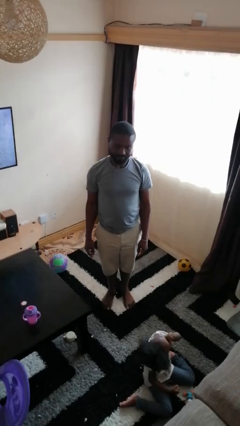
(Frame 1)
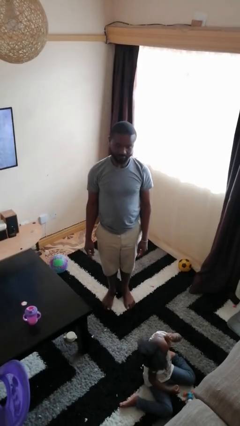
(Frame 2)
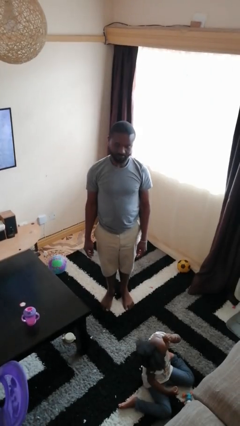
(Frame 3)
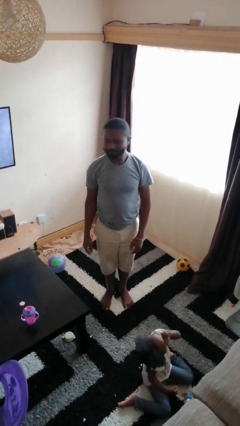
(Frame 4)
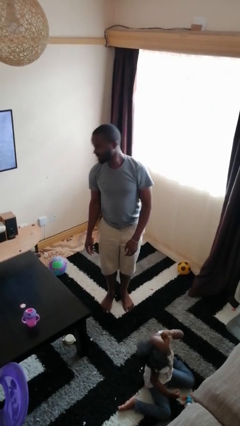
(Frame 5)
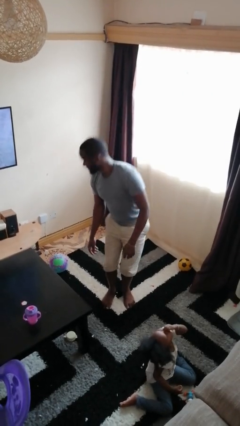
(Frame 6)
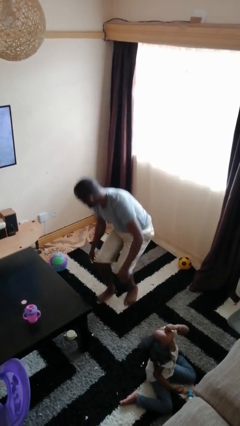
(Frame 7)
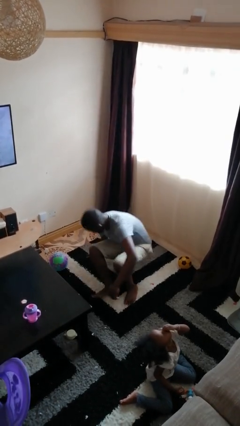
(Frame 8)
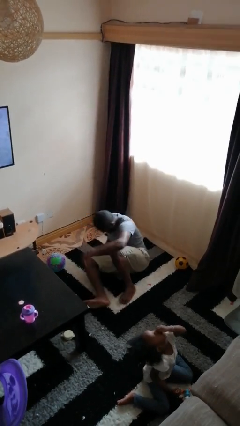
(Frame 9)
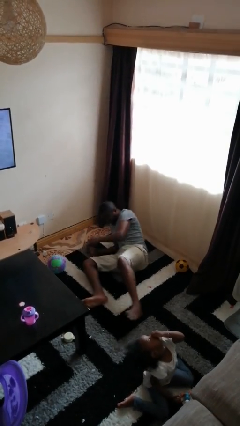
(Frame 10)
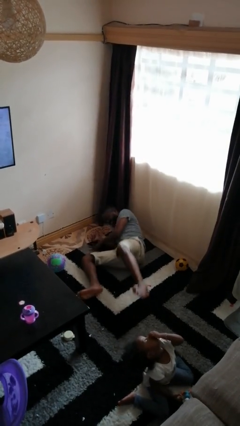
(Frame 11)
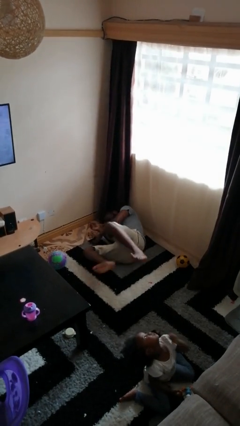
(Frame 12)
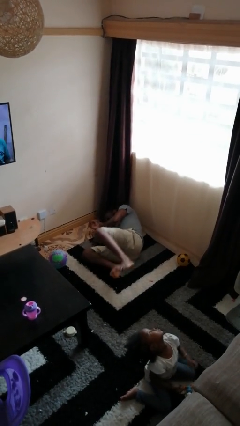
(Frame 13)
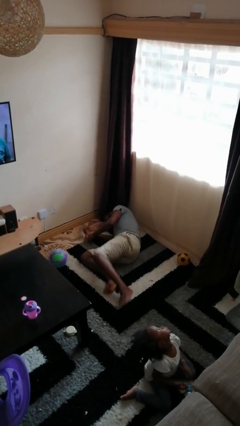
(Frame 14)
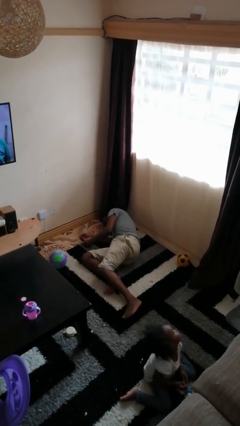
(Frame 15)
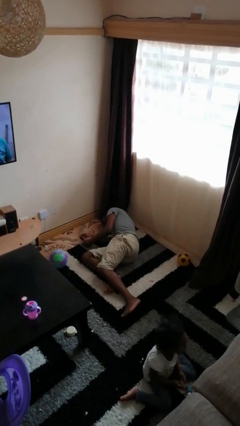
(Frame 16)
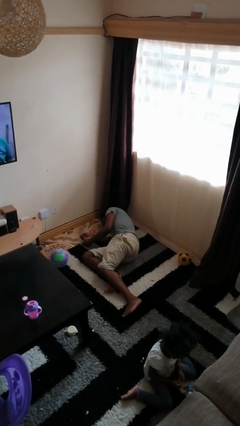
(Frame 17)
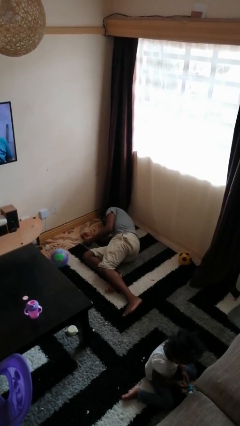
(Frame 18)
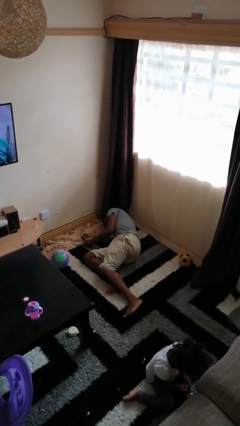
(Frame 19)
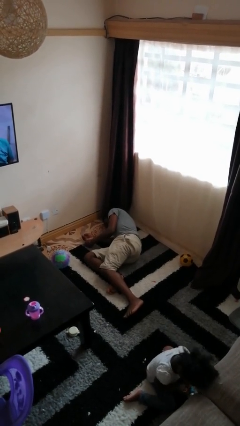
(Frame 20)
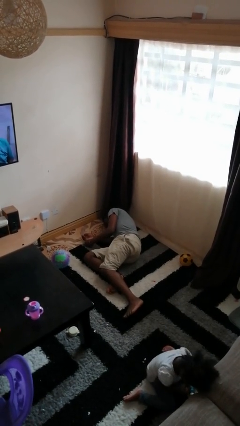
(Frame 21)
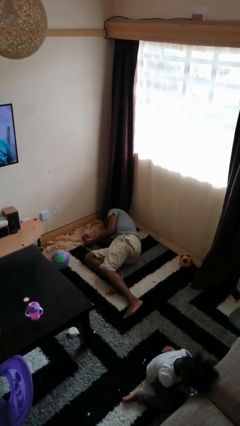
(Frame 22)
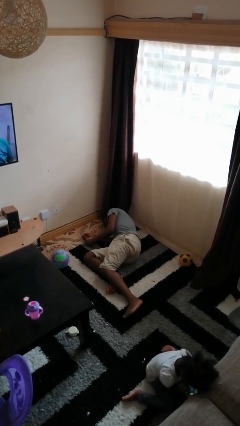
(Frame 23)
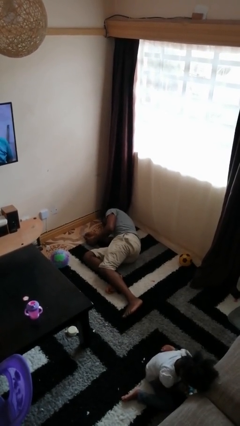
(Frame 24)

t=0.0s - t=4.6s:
person falls while standing

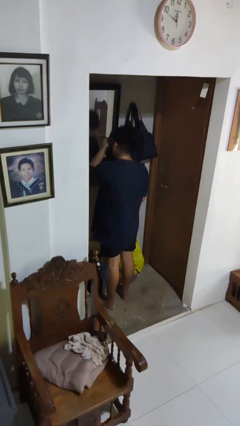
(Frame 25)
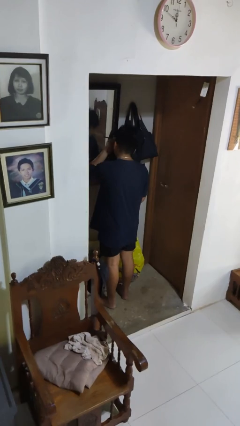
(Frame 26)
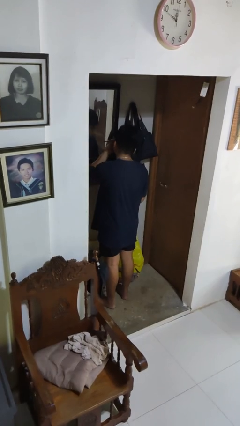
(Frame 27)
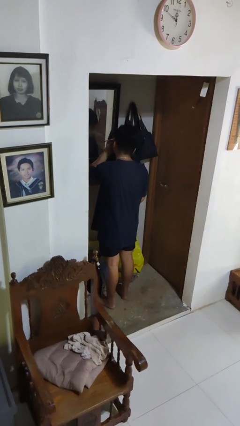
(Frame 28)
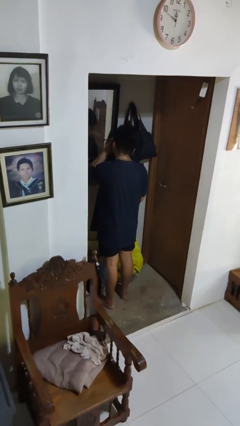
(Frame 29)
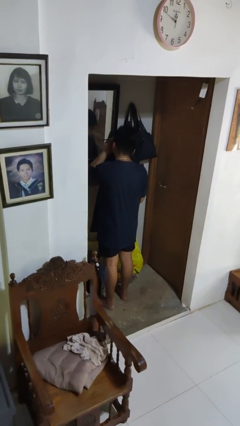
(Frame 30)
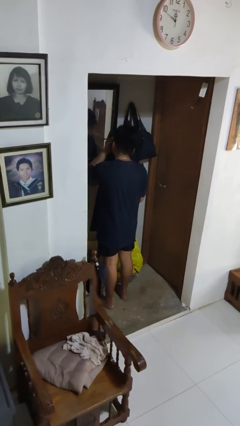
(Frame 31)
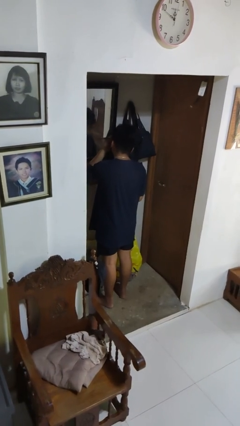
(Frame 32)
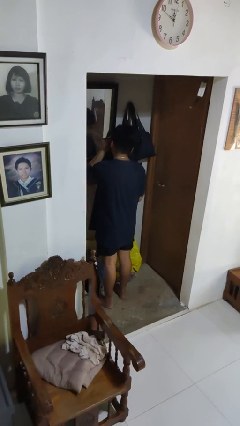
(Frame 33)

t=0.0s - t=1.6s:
person applies eye makeup

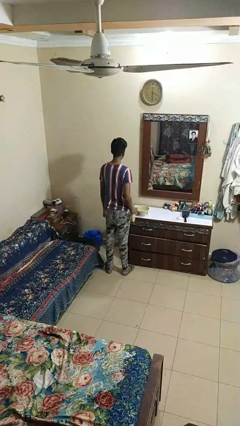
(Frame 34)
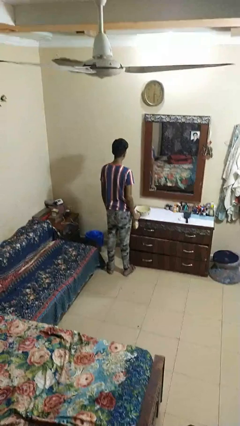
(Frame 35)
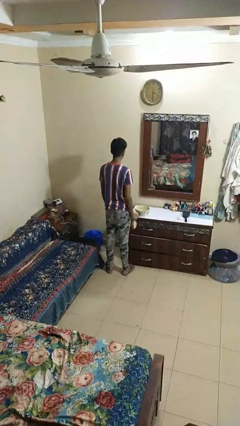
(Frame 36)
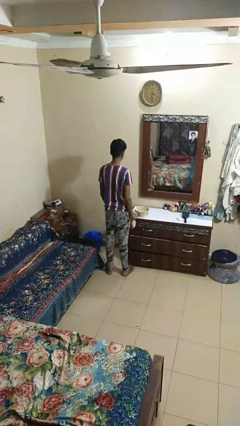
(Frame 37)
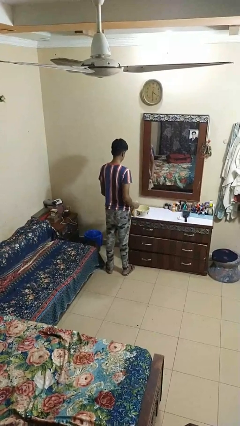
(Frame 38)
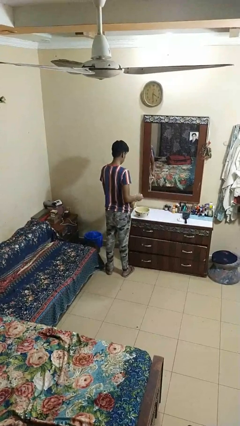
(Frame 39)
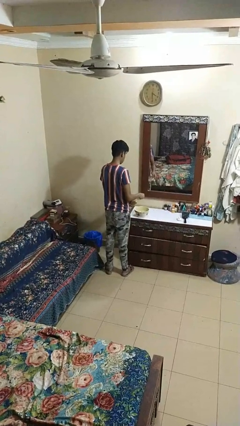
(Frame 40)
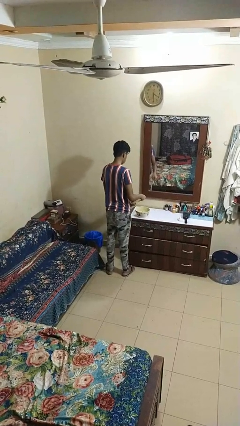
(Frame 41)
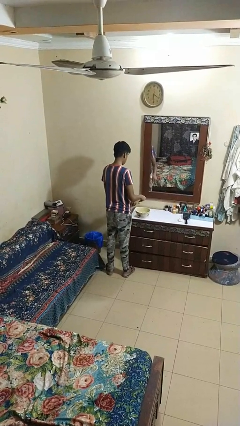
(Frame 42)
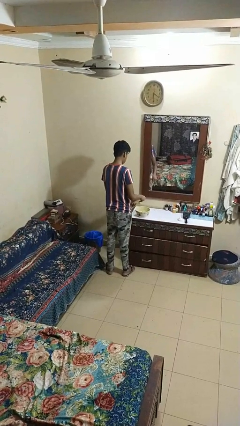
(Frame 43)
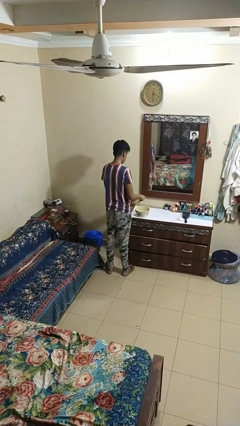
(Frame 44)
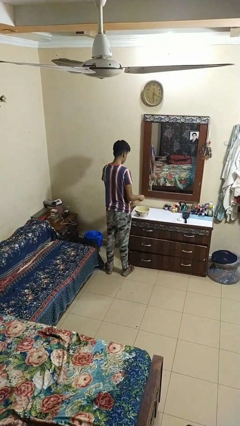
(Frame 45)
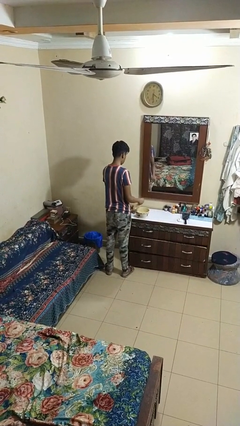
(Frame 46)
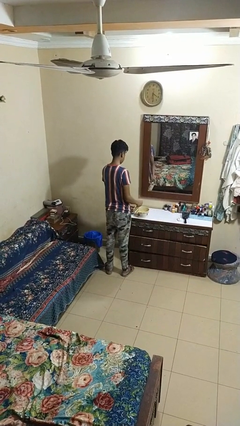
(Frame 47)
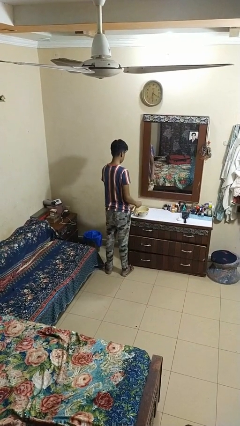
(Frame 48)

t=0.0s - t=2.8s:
person pours into bowl

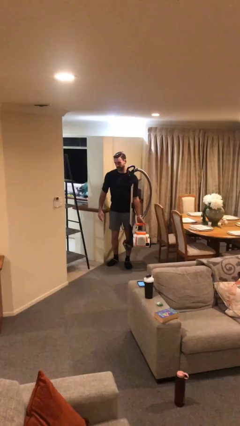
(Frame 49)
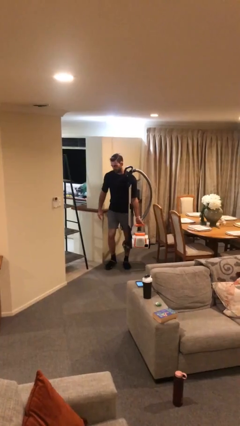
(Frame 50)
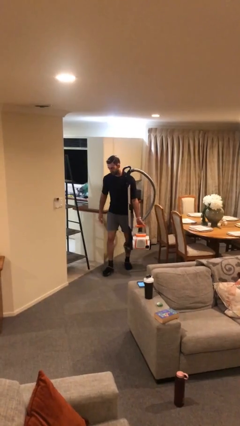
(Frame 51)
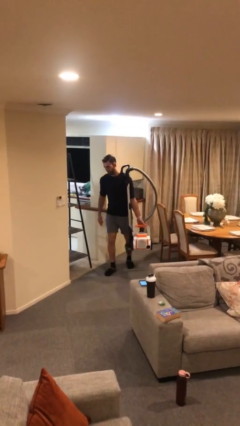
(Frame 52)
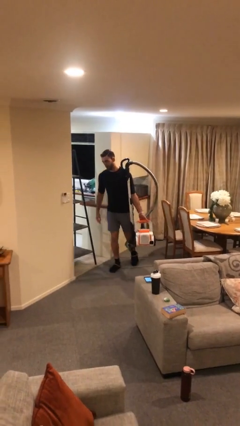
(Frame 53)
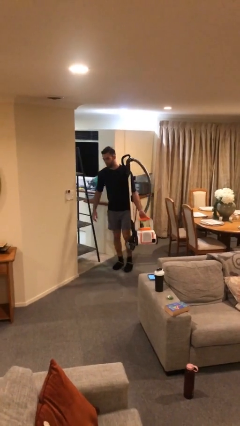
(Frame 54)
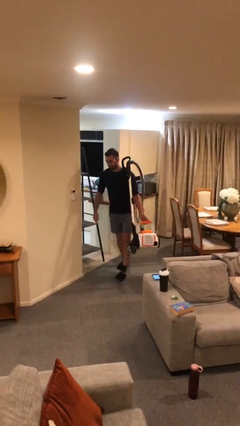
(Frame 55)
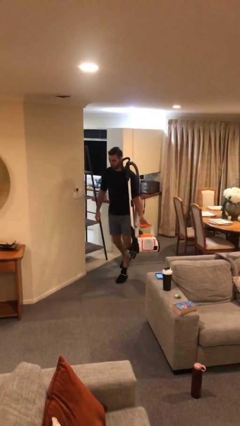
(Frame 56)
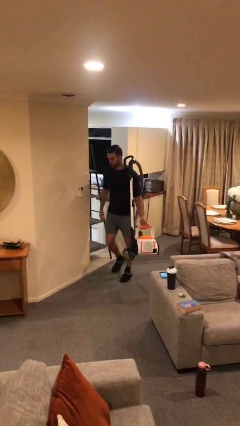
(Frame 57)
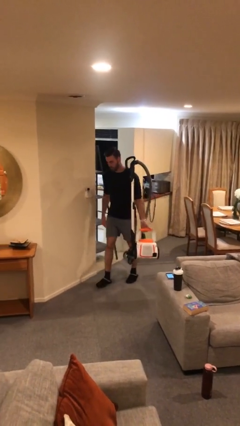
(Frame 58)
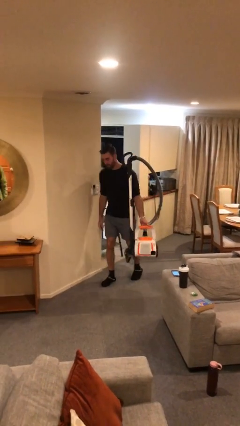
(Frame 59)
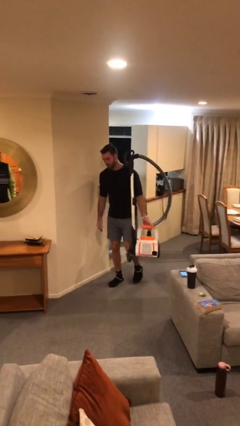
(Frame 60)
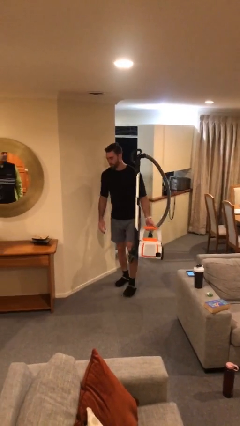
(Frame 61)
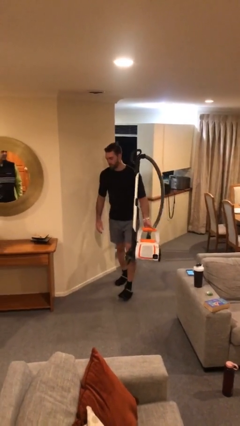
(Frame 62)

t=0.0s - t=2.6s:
person carries heavy object

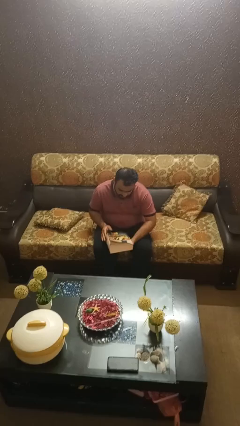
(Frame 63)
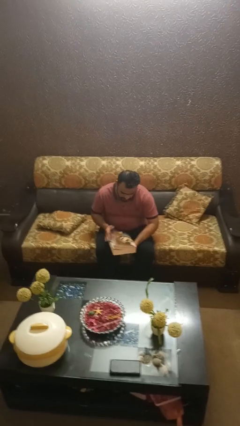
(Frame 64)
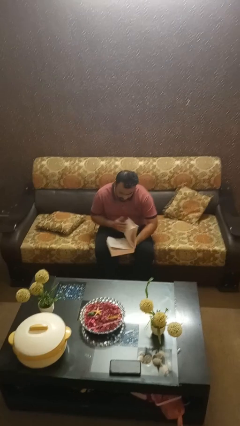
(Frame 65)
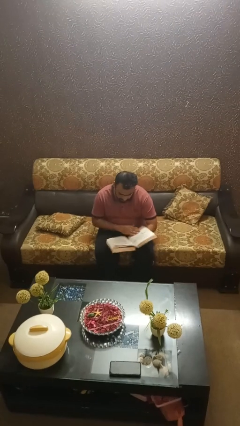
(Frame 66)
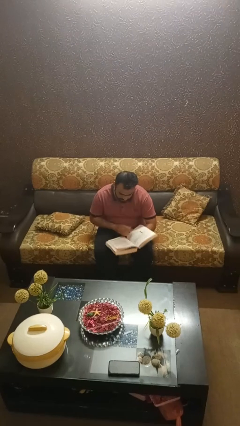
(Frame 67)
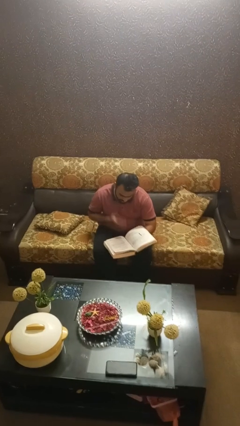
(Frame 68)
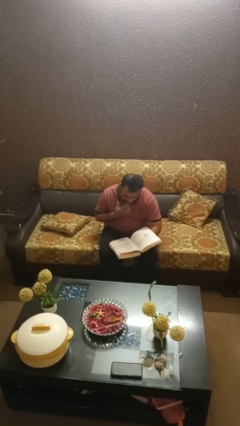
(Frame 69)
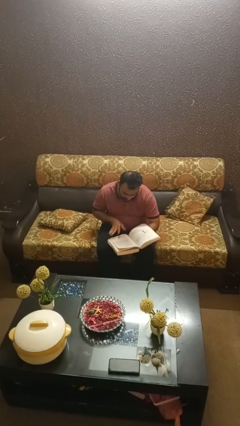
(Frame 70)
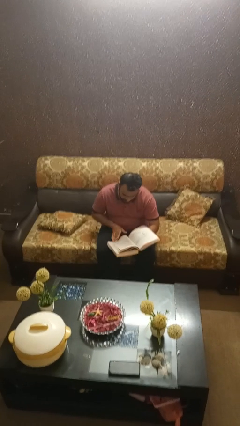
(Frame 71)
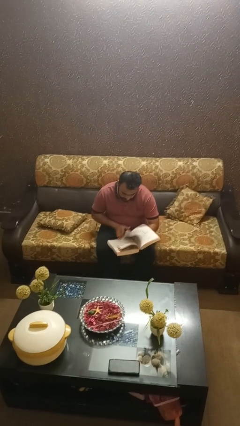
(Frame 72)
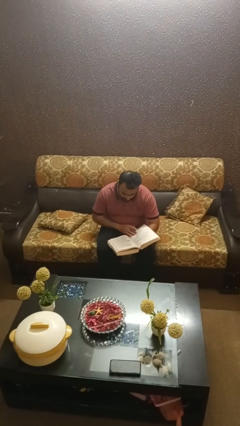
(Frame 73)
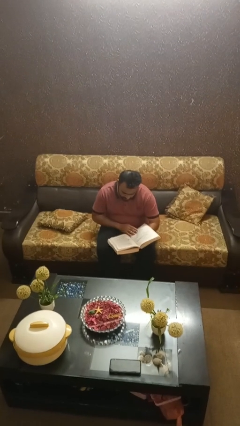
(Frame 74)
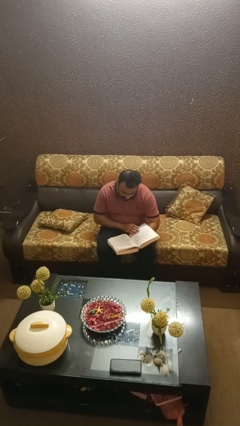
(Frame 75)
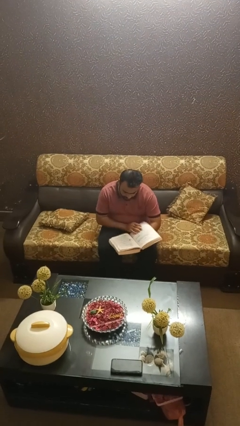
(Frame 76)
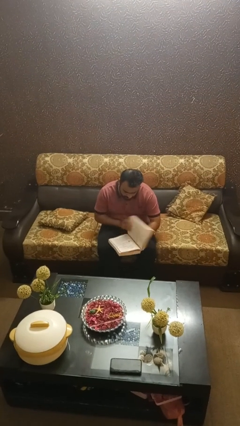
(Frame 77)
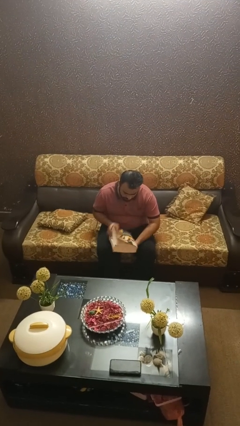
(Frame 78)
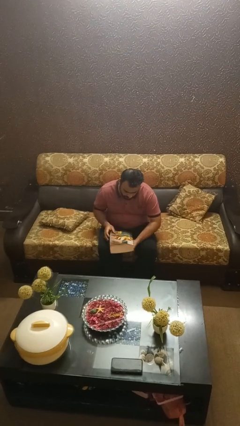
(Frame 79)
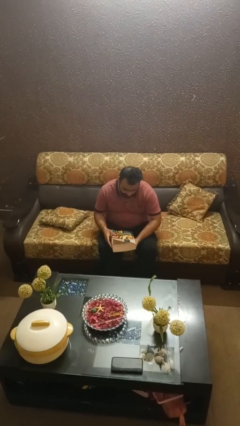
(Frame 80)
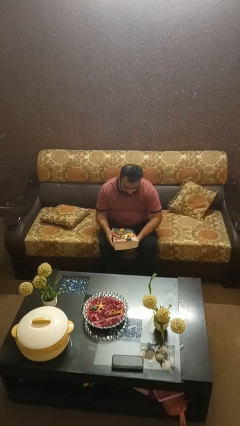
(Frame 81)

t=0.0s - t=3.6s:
person reads book

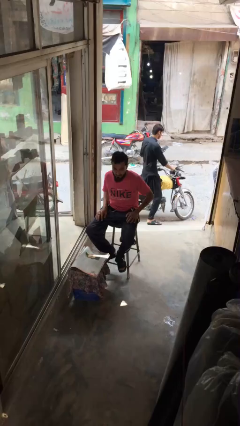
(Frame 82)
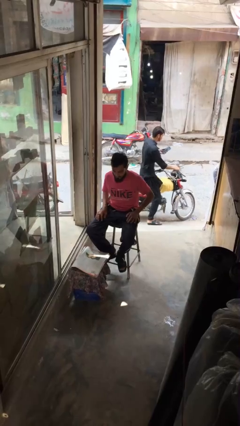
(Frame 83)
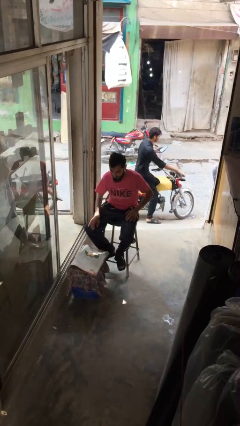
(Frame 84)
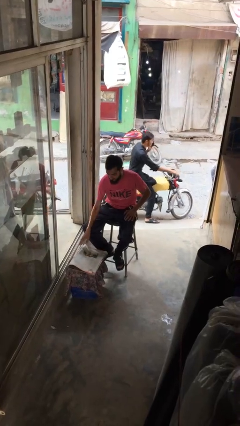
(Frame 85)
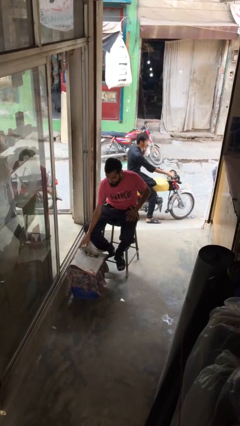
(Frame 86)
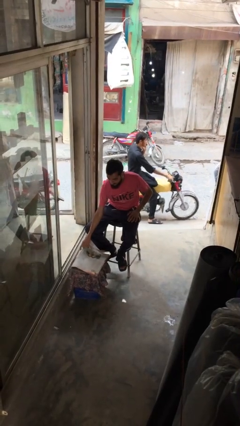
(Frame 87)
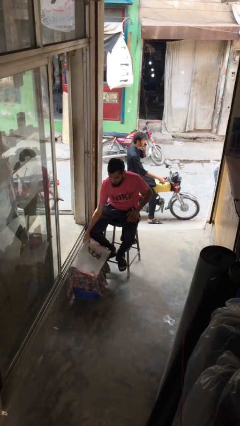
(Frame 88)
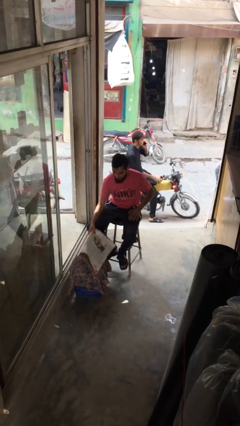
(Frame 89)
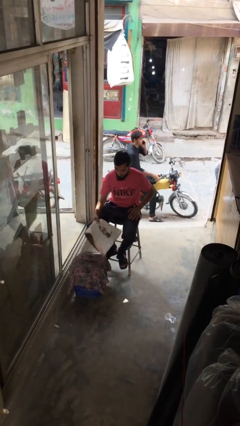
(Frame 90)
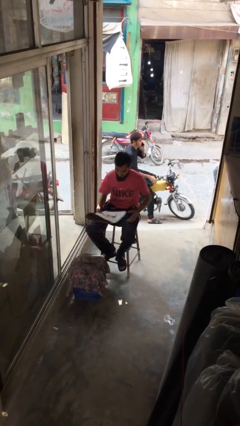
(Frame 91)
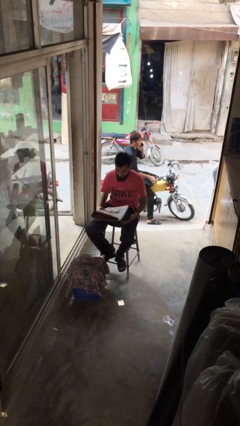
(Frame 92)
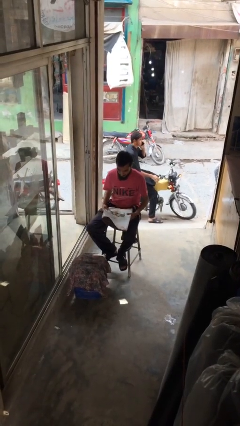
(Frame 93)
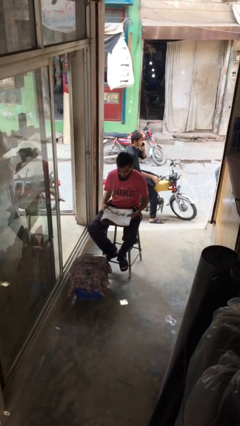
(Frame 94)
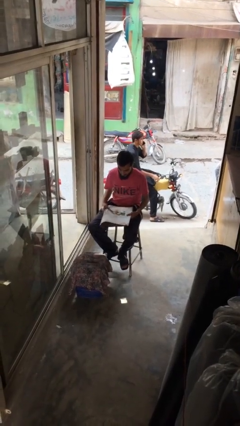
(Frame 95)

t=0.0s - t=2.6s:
person picks up object from table
